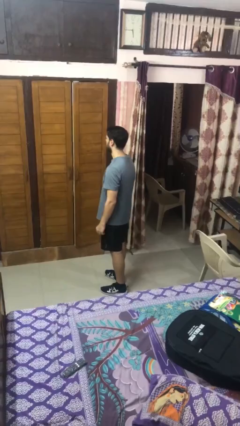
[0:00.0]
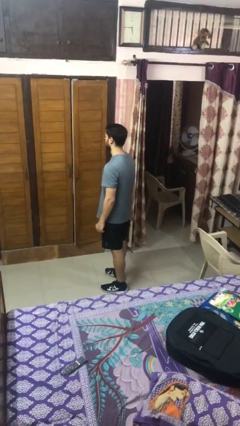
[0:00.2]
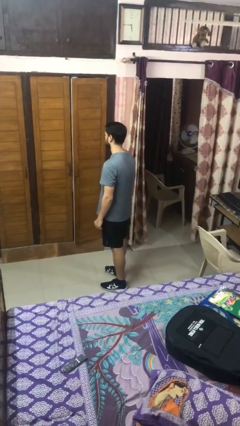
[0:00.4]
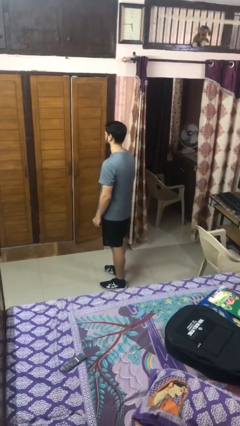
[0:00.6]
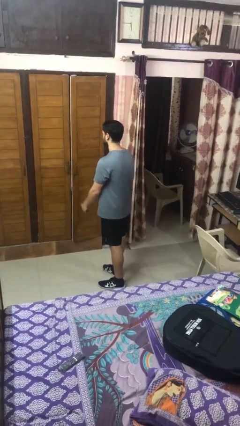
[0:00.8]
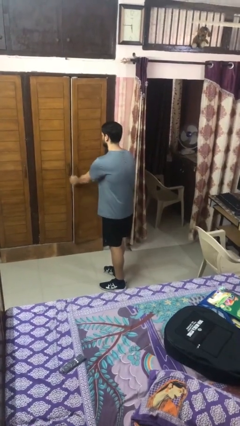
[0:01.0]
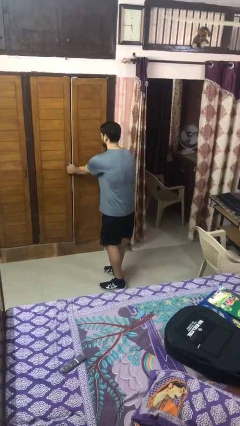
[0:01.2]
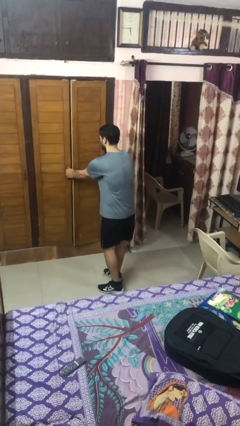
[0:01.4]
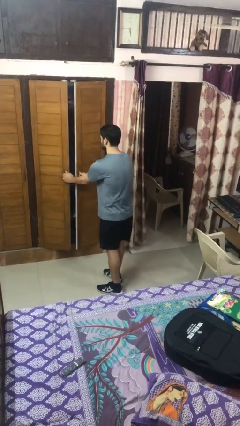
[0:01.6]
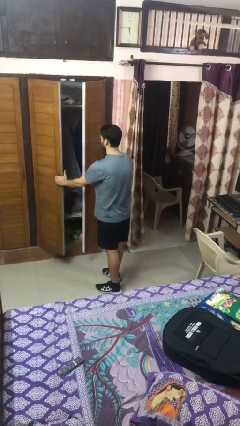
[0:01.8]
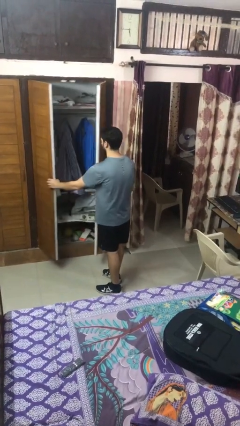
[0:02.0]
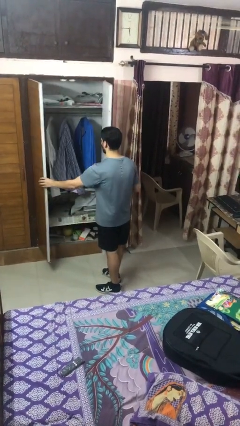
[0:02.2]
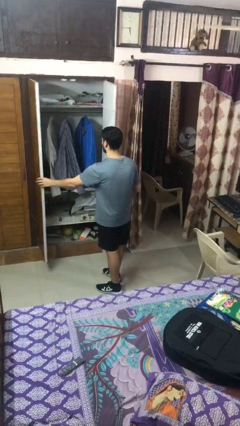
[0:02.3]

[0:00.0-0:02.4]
person opens closet door

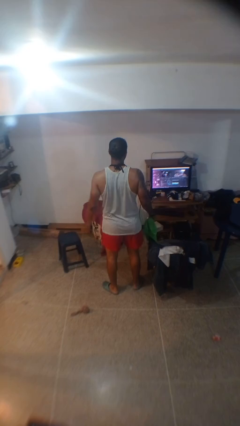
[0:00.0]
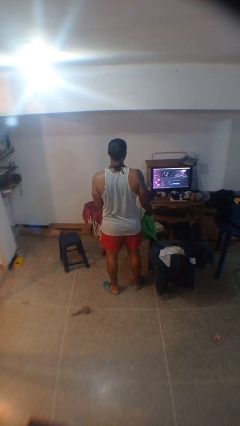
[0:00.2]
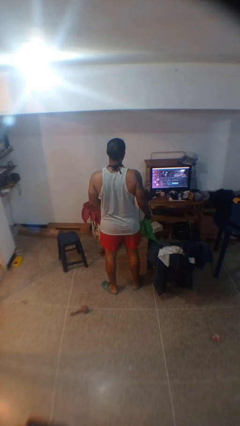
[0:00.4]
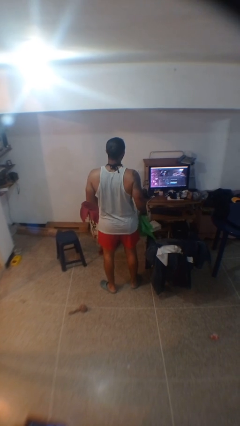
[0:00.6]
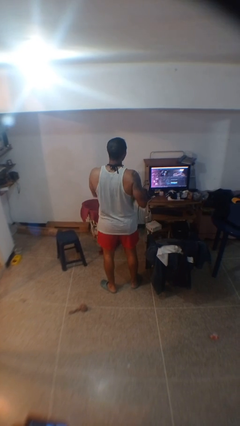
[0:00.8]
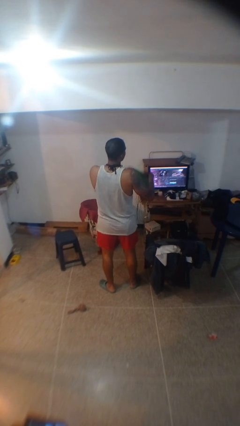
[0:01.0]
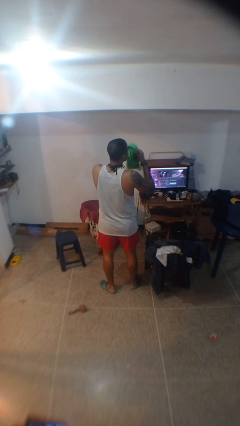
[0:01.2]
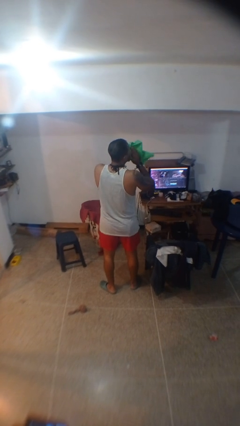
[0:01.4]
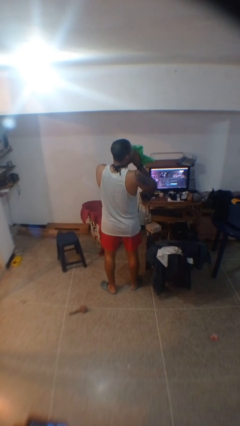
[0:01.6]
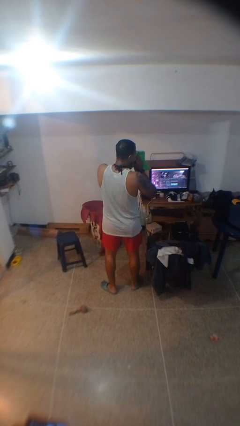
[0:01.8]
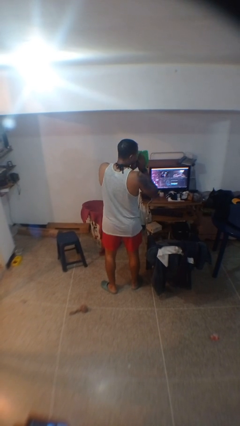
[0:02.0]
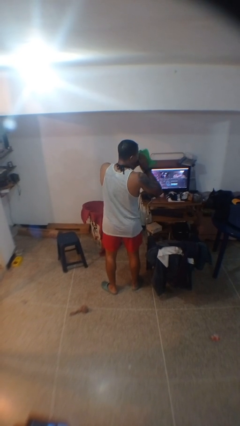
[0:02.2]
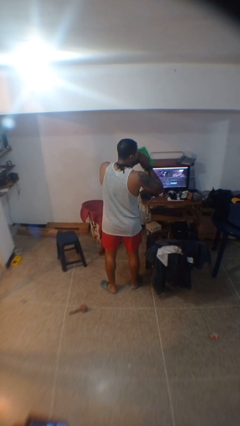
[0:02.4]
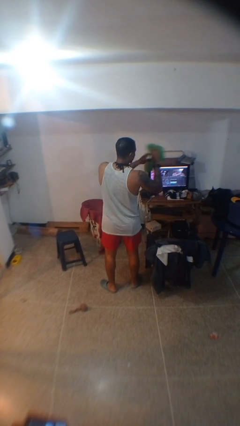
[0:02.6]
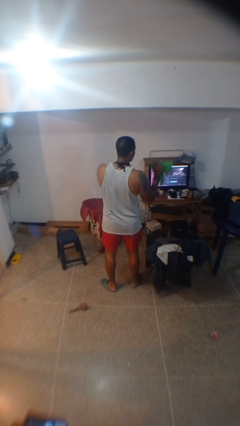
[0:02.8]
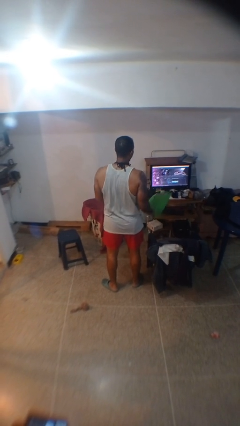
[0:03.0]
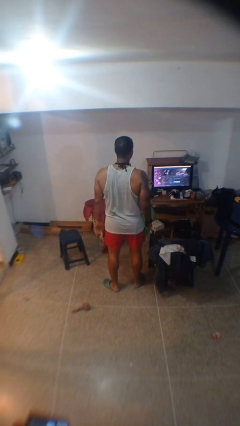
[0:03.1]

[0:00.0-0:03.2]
person blows nose

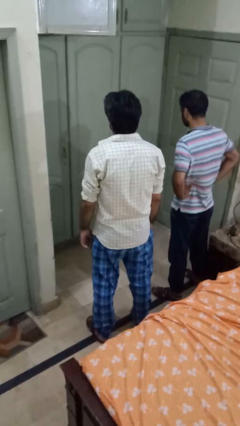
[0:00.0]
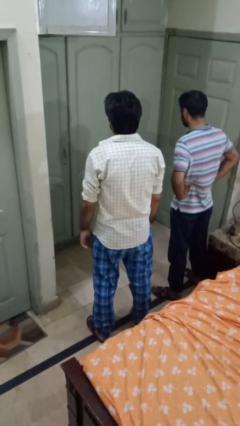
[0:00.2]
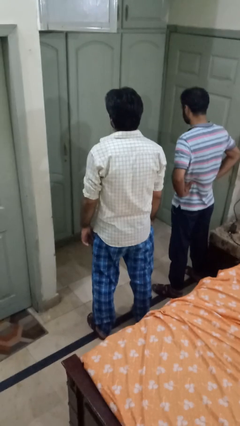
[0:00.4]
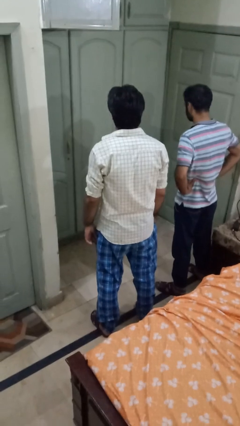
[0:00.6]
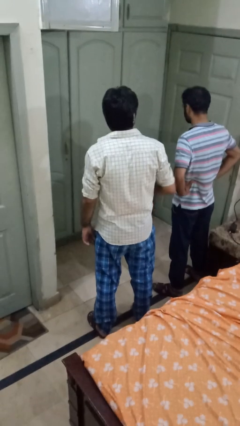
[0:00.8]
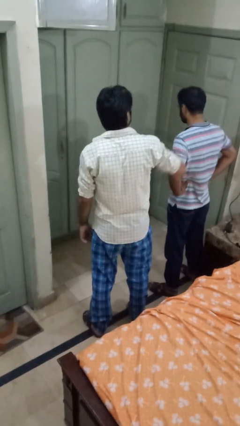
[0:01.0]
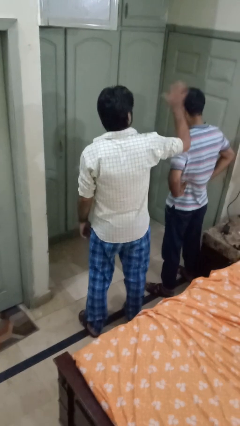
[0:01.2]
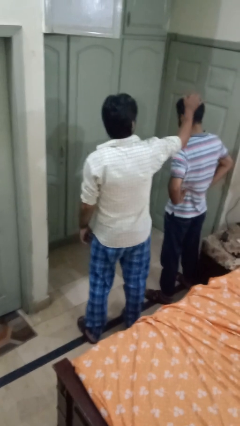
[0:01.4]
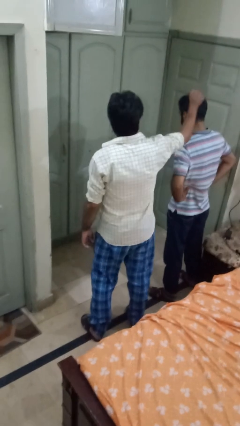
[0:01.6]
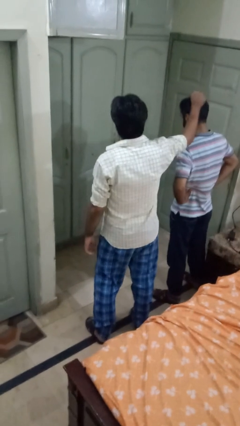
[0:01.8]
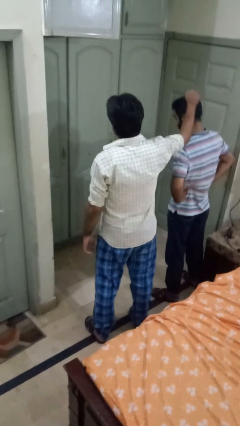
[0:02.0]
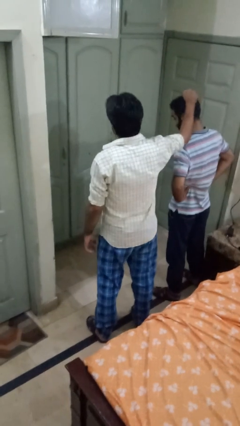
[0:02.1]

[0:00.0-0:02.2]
person grabs person by hair

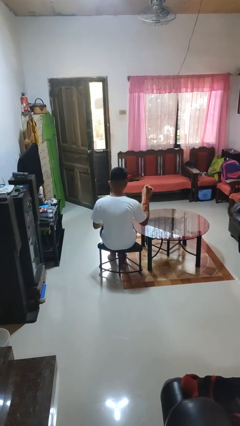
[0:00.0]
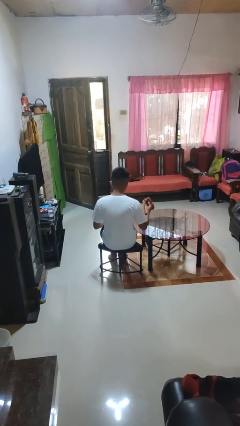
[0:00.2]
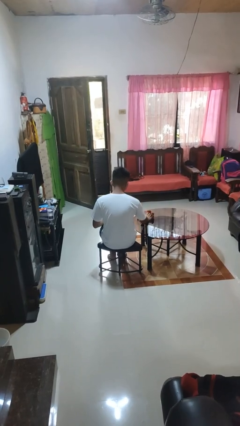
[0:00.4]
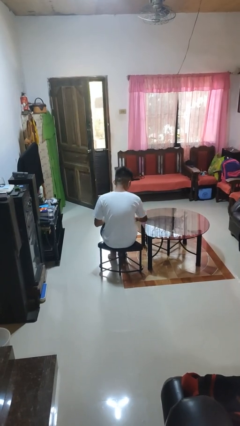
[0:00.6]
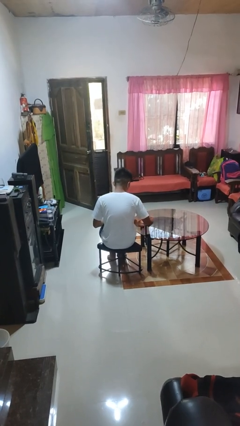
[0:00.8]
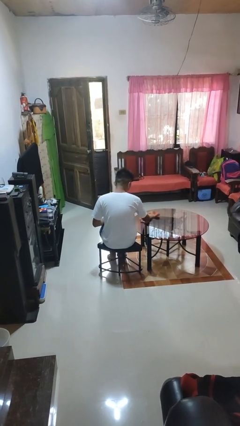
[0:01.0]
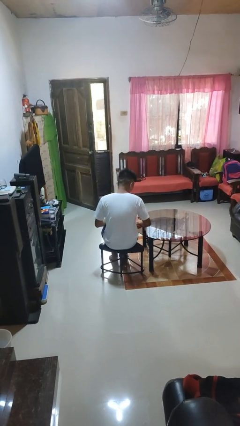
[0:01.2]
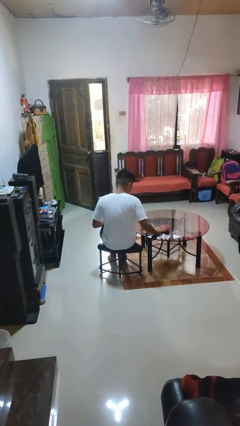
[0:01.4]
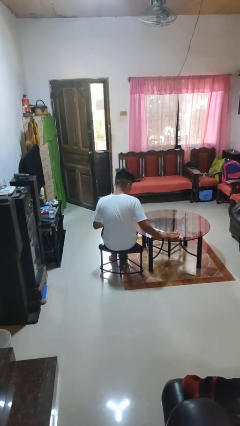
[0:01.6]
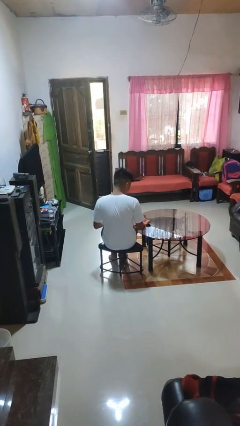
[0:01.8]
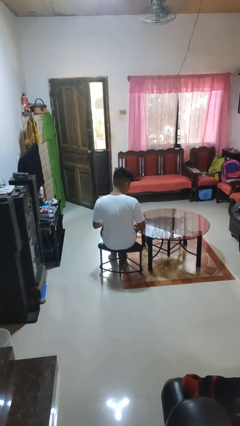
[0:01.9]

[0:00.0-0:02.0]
person cleans table with rag

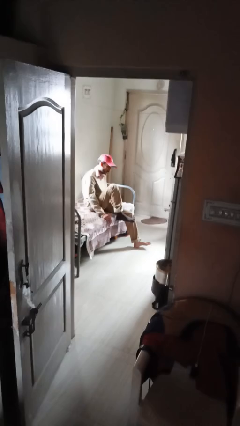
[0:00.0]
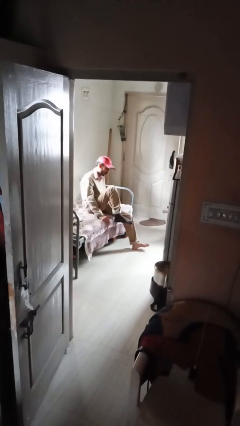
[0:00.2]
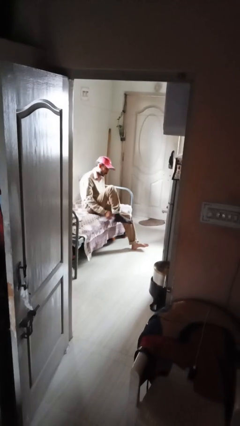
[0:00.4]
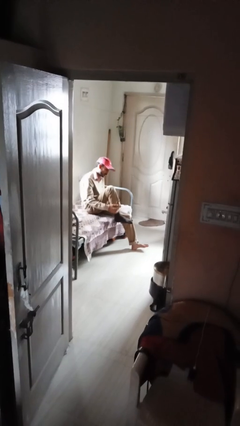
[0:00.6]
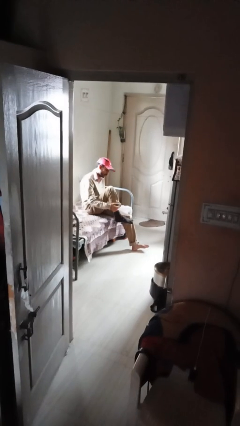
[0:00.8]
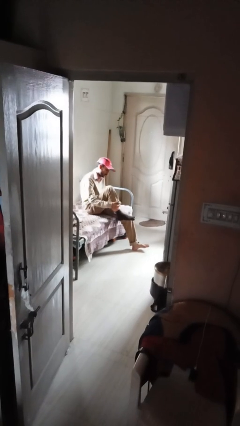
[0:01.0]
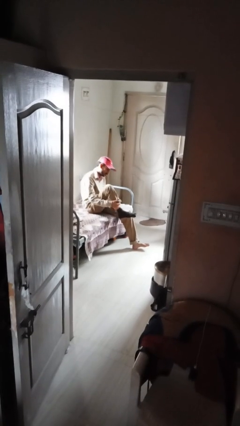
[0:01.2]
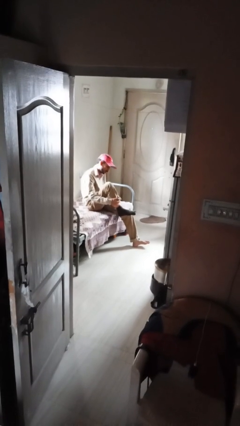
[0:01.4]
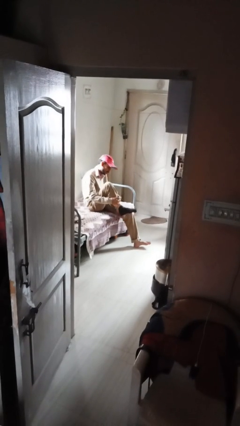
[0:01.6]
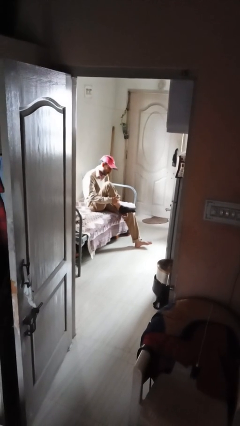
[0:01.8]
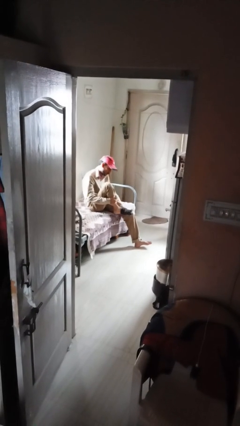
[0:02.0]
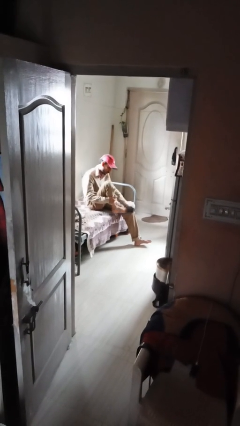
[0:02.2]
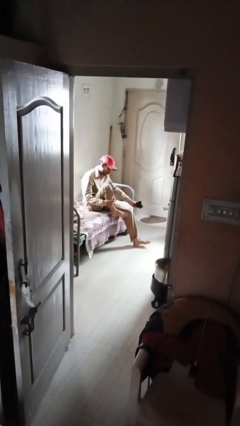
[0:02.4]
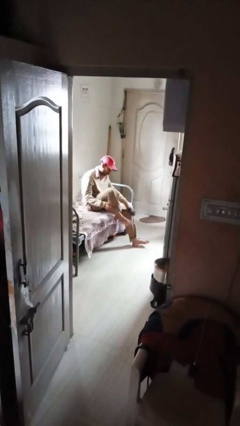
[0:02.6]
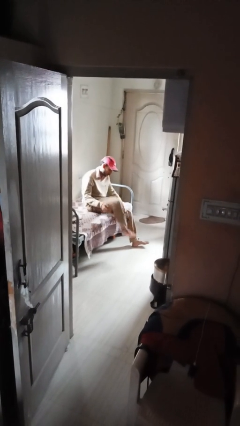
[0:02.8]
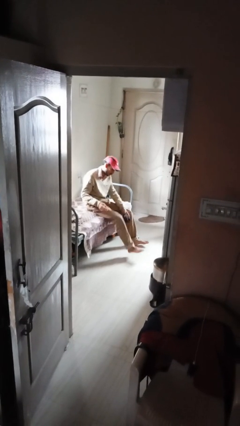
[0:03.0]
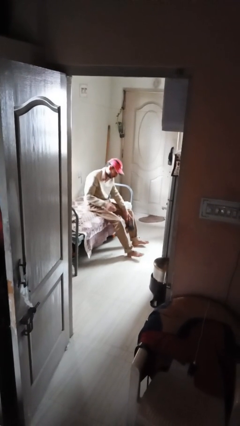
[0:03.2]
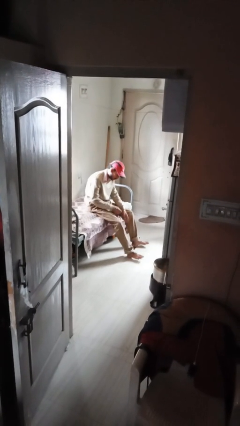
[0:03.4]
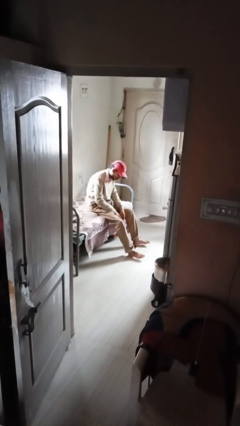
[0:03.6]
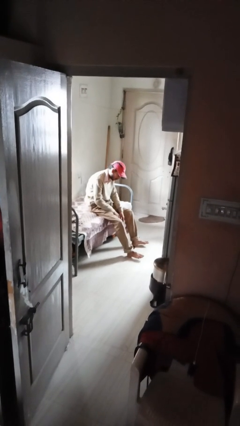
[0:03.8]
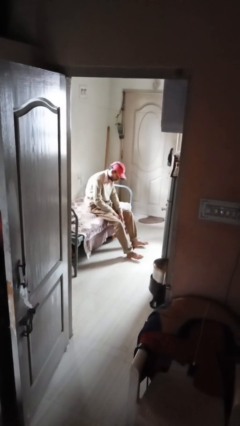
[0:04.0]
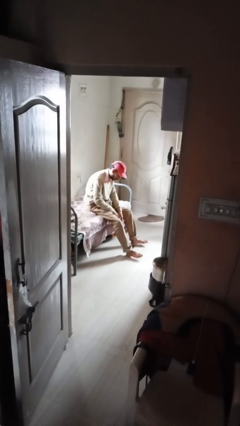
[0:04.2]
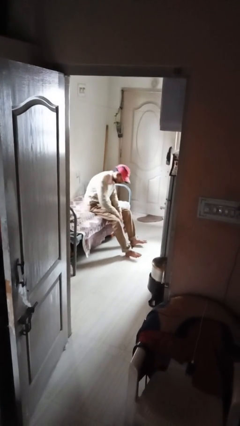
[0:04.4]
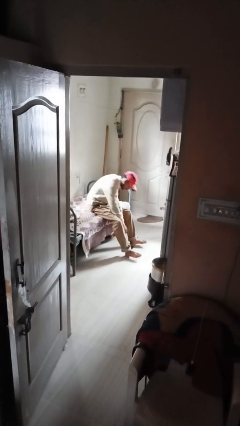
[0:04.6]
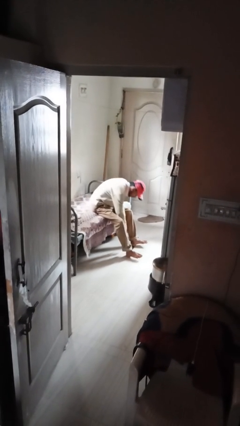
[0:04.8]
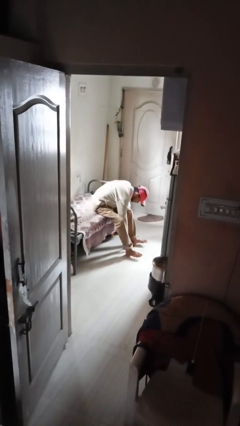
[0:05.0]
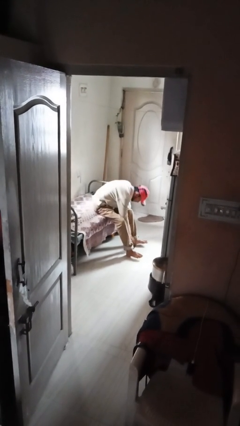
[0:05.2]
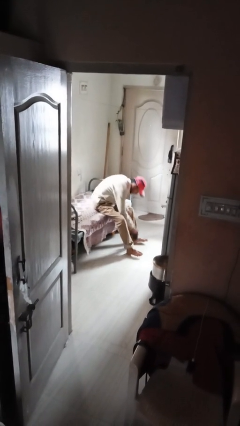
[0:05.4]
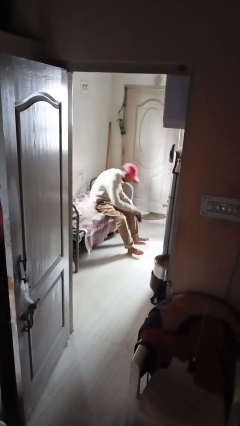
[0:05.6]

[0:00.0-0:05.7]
person takes off socks

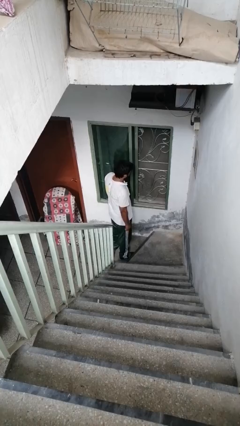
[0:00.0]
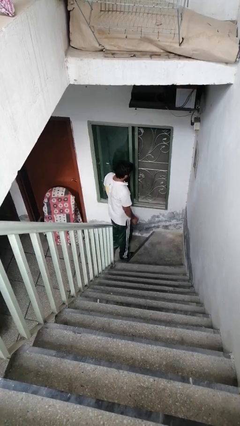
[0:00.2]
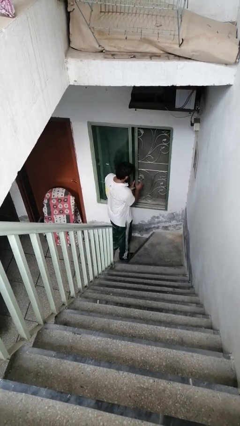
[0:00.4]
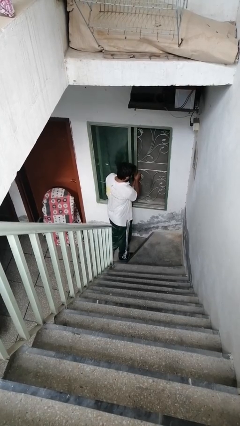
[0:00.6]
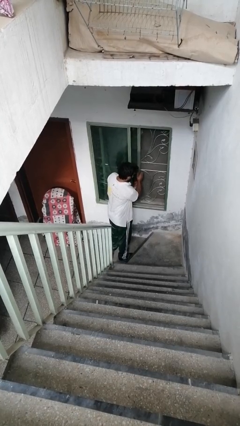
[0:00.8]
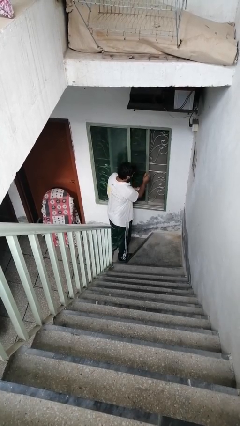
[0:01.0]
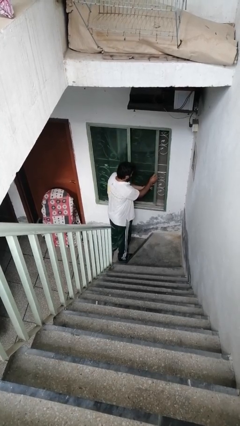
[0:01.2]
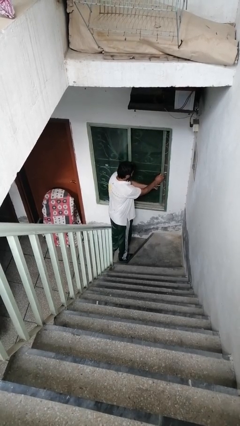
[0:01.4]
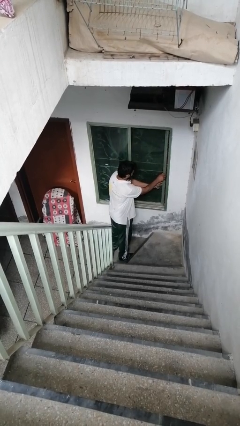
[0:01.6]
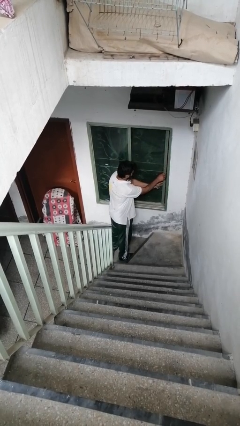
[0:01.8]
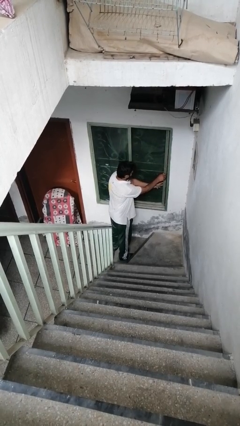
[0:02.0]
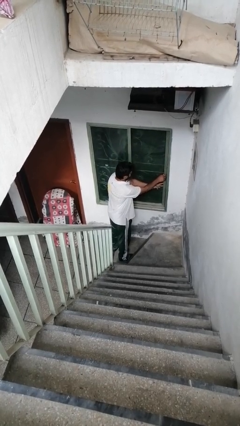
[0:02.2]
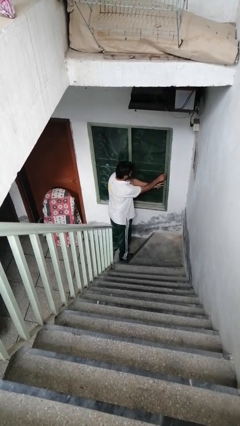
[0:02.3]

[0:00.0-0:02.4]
person closes home window
